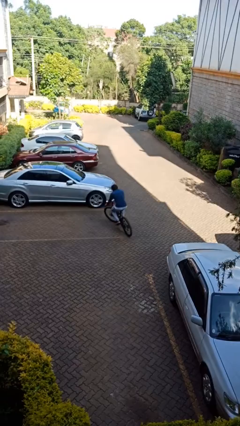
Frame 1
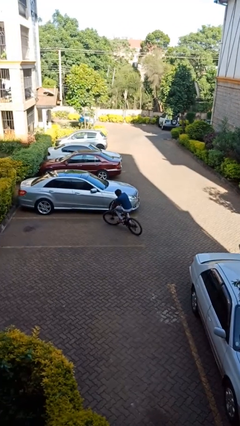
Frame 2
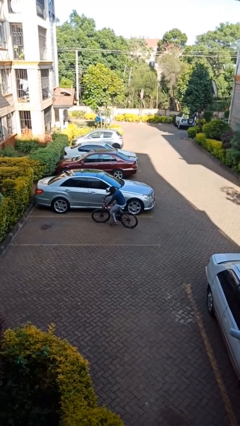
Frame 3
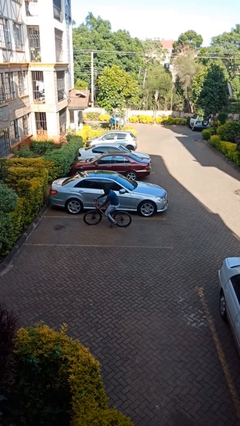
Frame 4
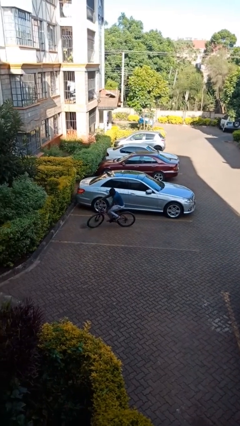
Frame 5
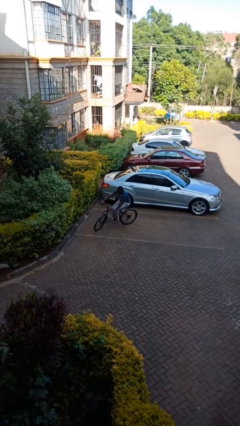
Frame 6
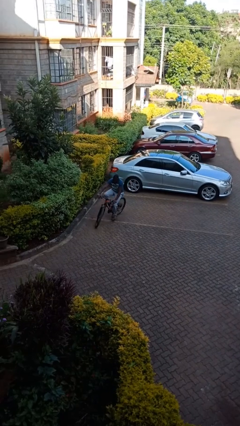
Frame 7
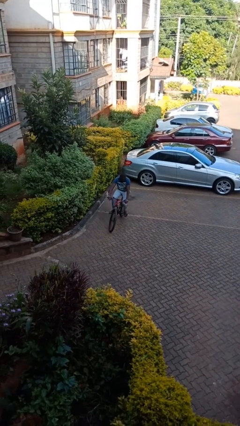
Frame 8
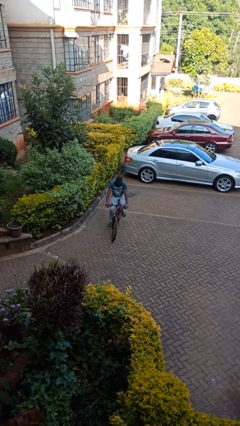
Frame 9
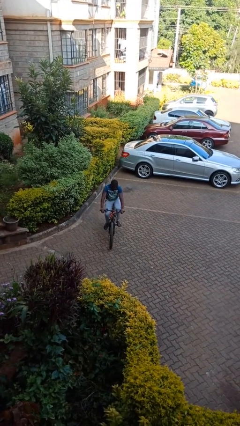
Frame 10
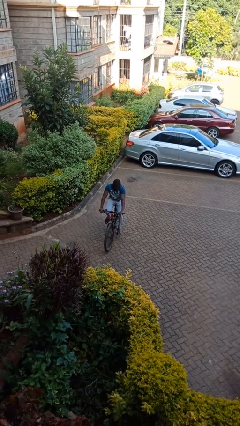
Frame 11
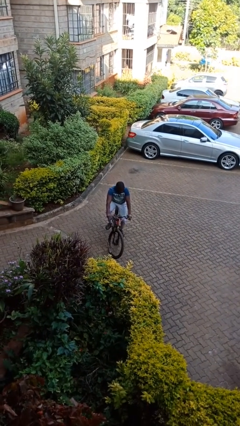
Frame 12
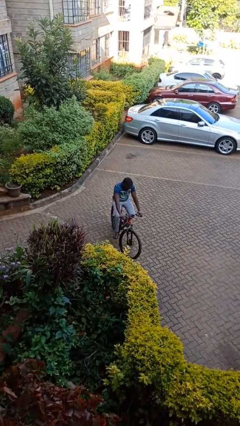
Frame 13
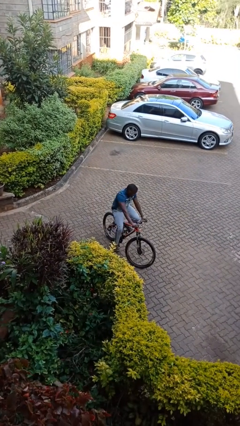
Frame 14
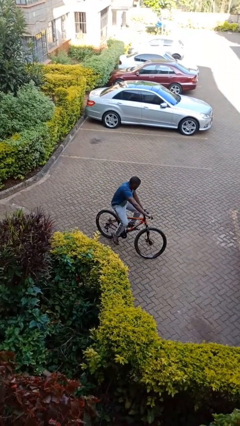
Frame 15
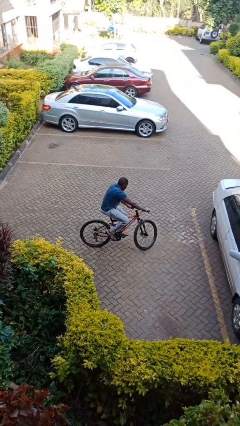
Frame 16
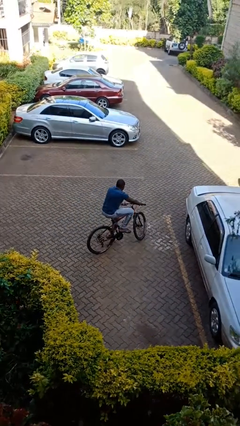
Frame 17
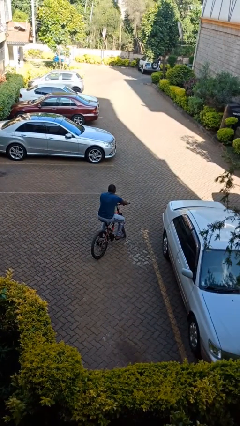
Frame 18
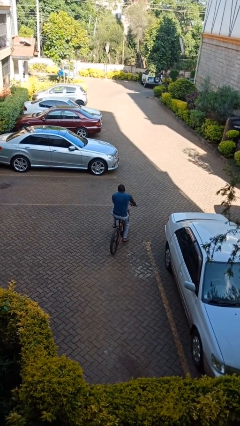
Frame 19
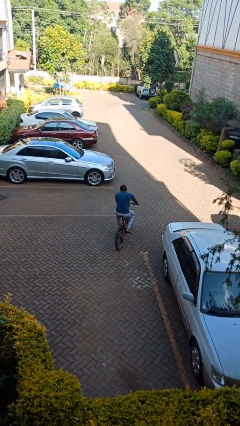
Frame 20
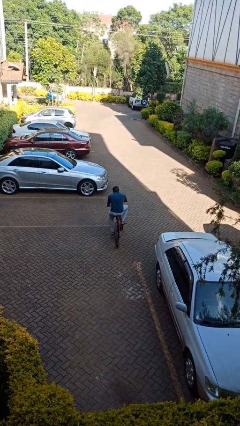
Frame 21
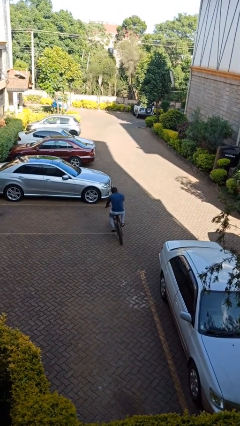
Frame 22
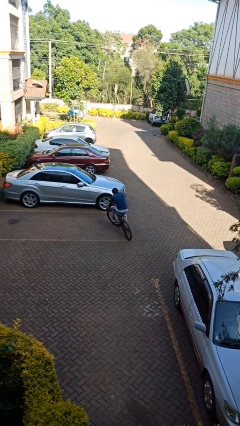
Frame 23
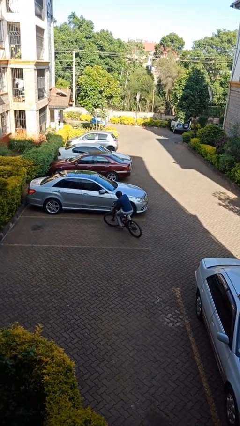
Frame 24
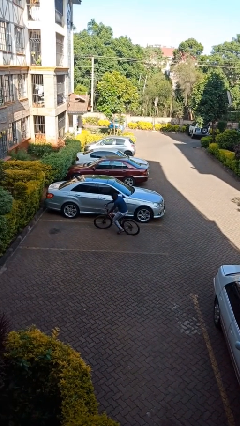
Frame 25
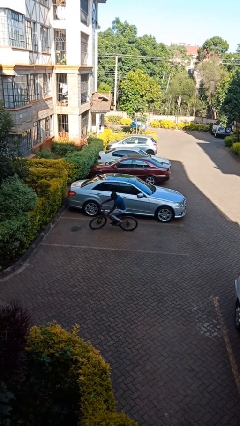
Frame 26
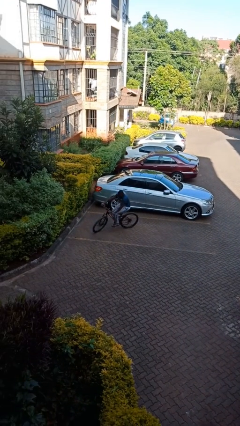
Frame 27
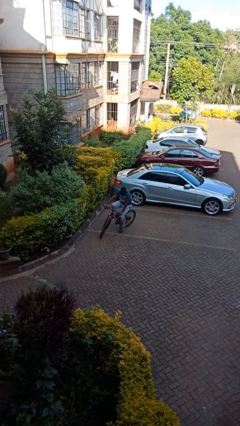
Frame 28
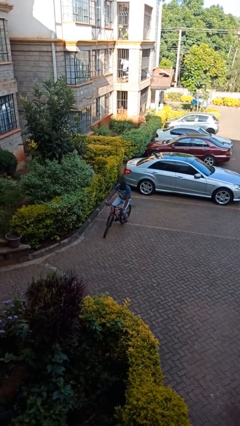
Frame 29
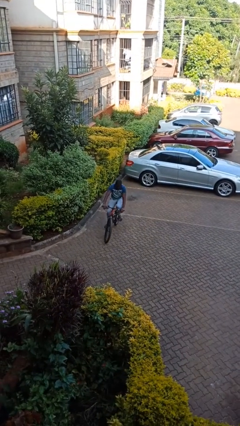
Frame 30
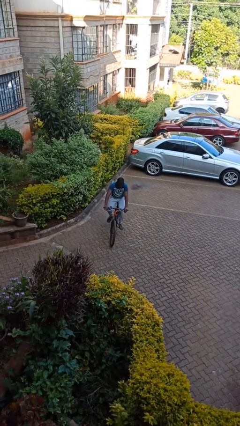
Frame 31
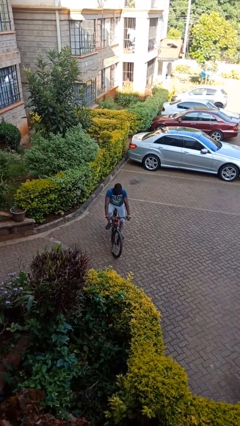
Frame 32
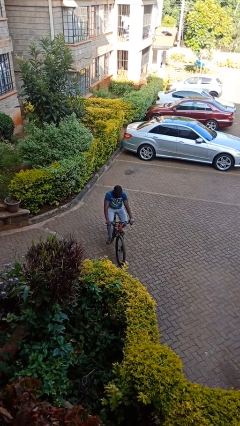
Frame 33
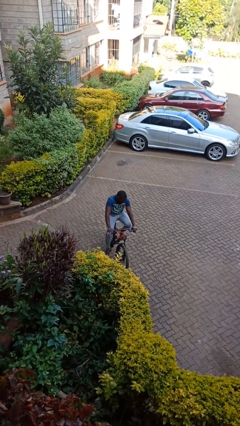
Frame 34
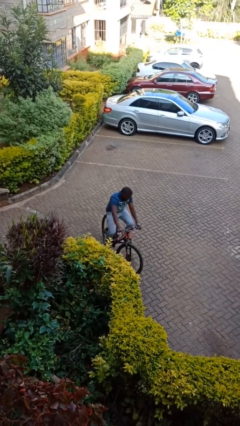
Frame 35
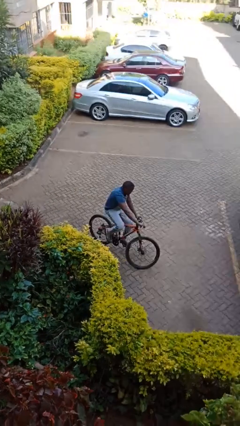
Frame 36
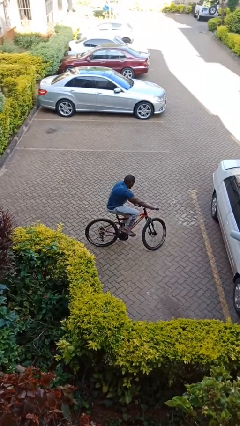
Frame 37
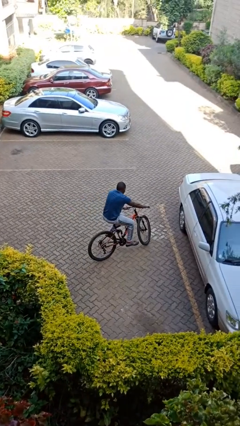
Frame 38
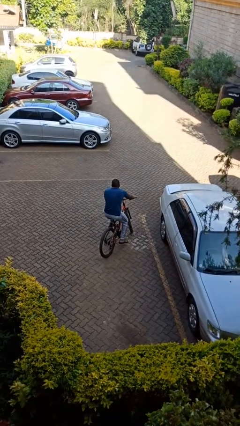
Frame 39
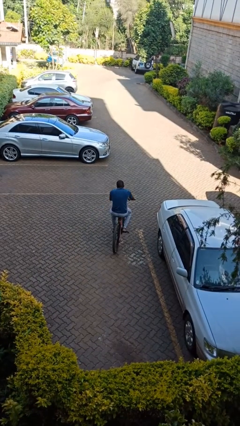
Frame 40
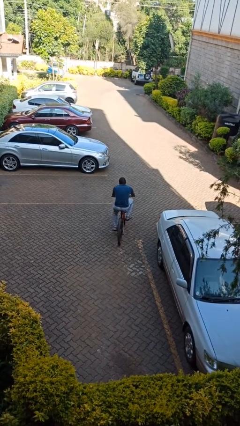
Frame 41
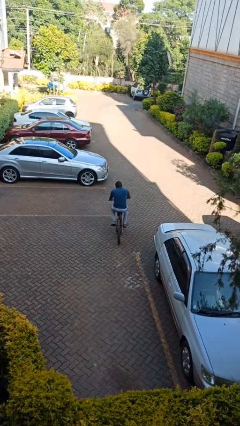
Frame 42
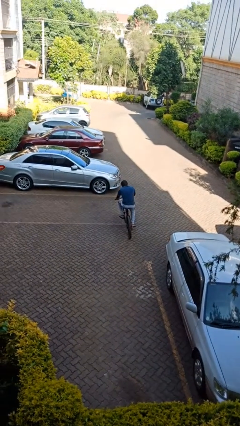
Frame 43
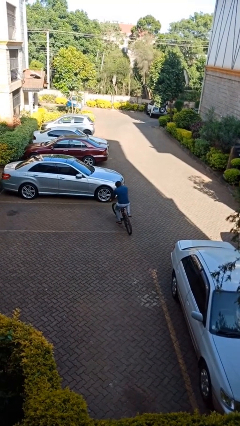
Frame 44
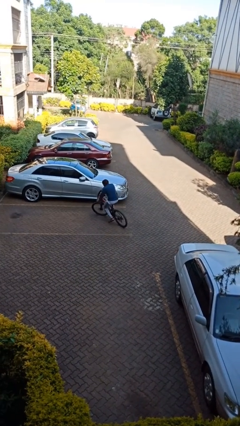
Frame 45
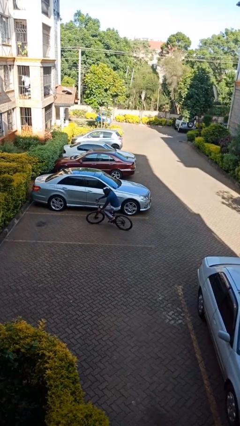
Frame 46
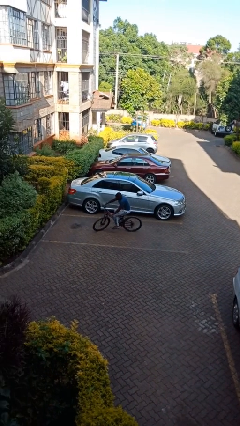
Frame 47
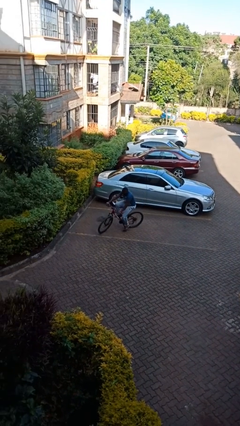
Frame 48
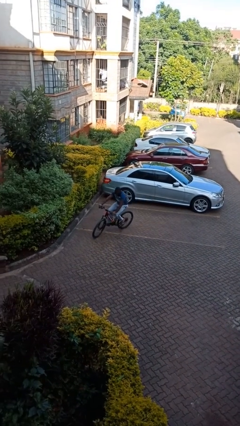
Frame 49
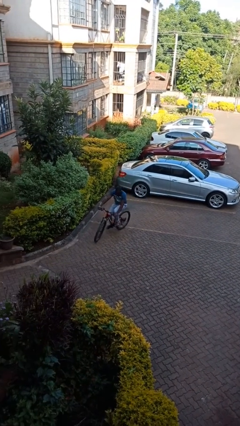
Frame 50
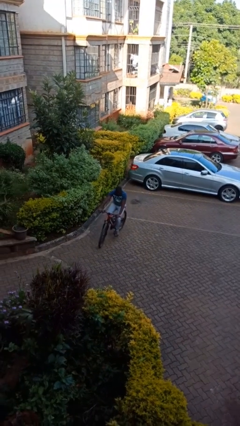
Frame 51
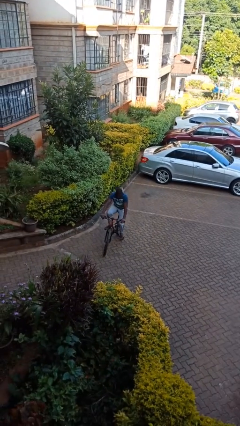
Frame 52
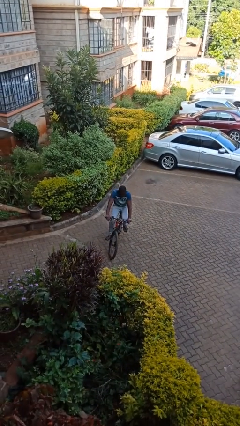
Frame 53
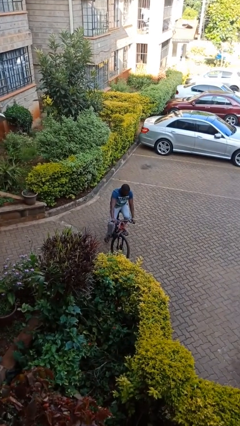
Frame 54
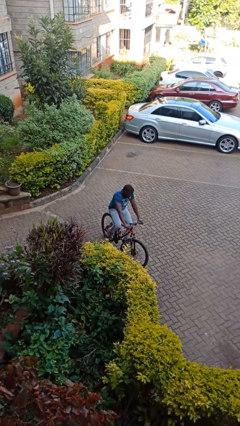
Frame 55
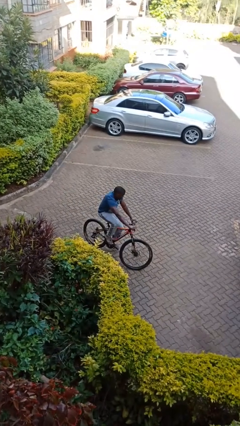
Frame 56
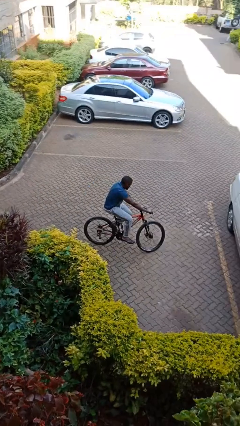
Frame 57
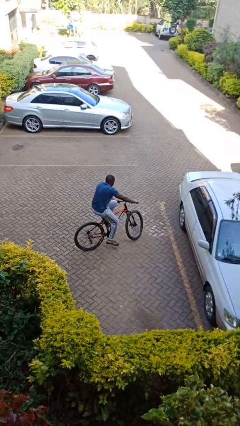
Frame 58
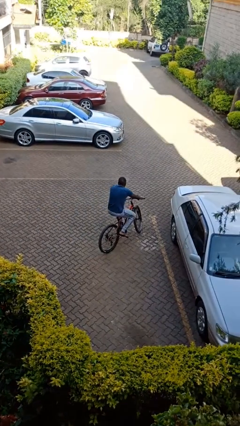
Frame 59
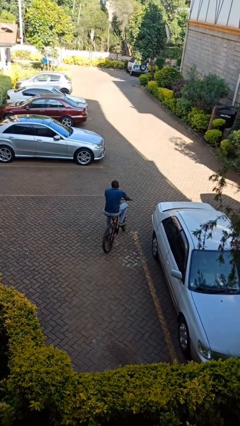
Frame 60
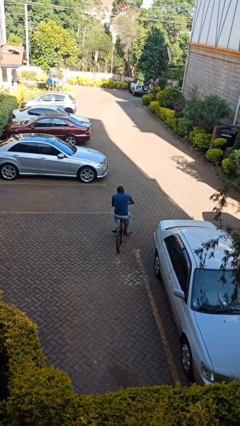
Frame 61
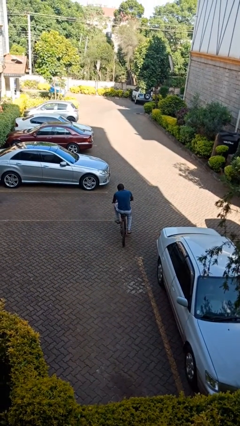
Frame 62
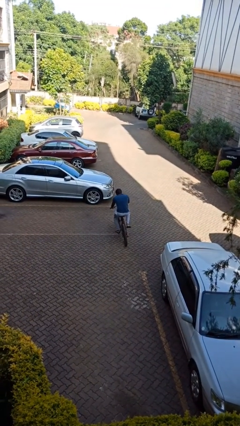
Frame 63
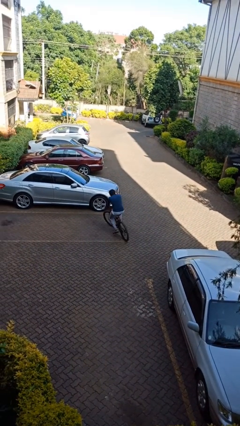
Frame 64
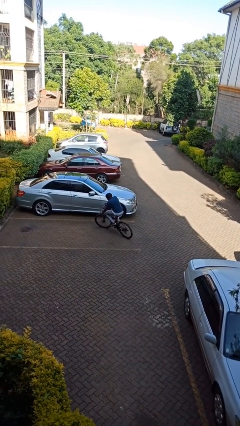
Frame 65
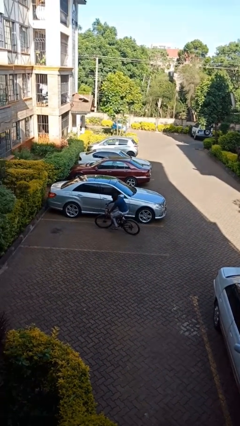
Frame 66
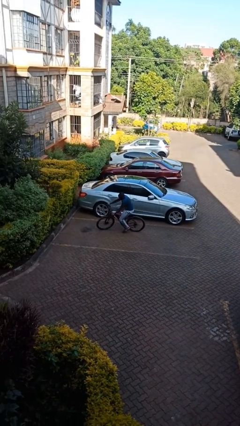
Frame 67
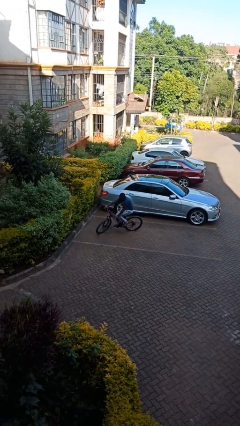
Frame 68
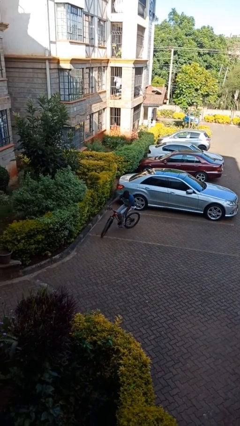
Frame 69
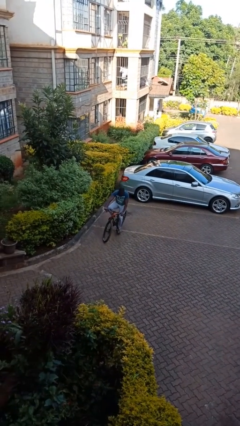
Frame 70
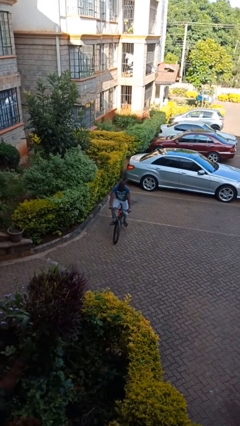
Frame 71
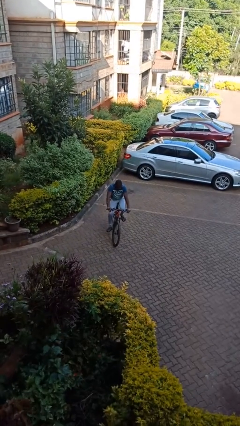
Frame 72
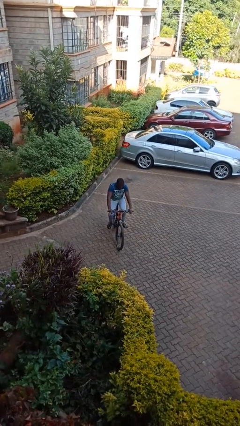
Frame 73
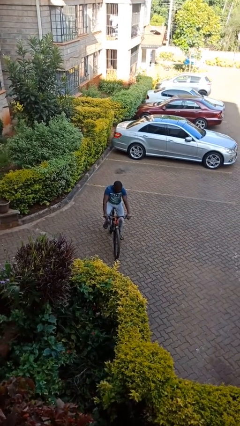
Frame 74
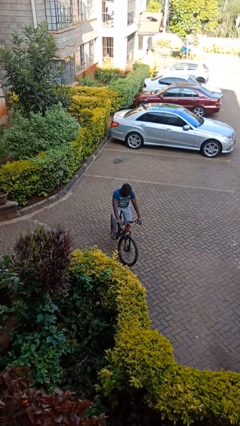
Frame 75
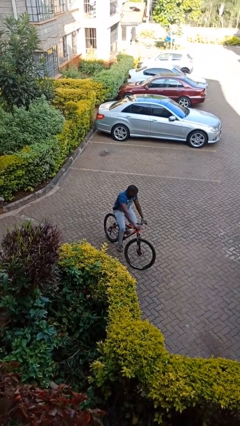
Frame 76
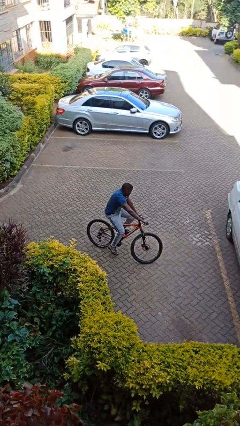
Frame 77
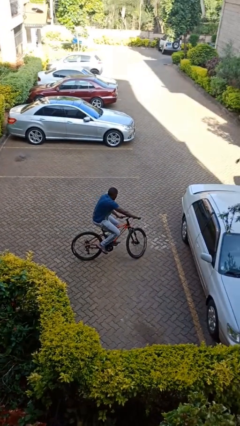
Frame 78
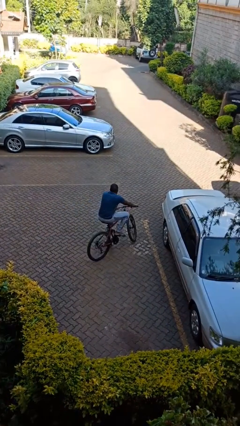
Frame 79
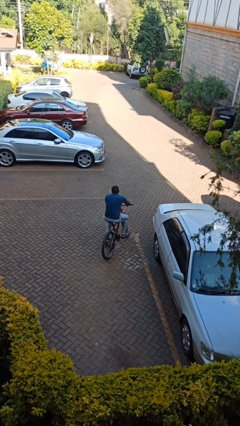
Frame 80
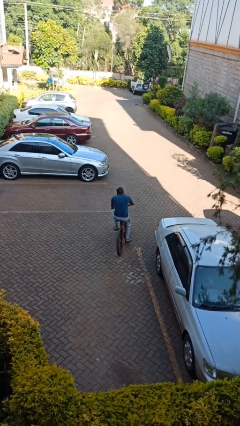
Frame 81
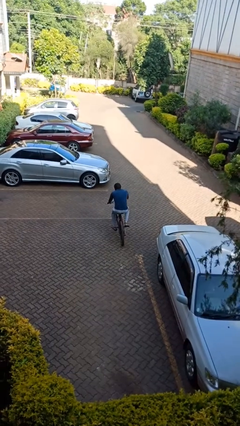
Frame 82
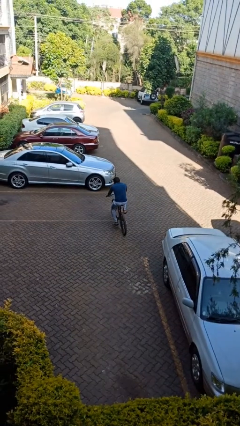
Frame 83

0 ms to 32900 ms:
person rides bicycle

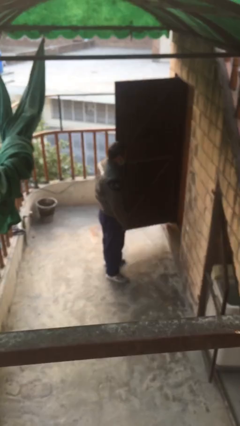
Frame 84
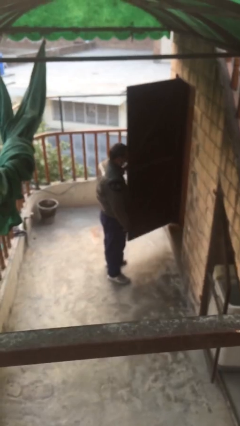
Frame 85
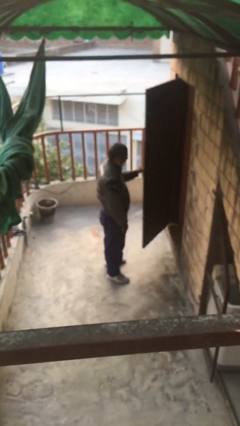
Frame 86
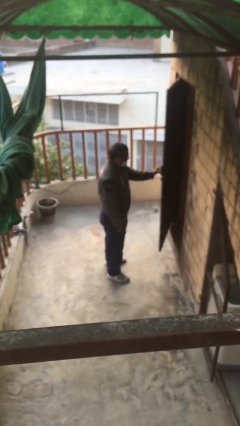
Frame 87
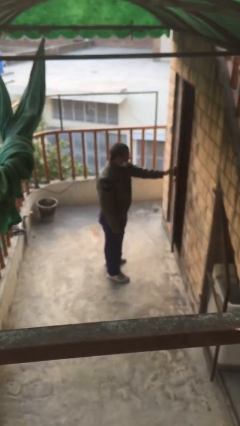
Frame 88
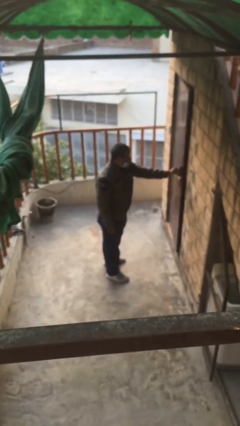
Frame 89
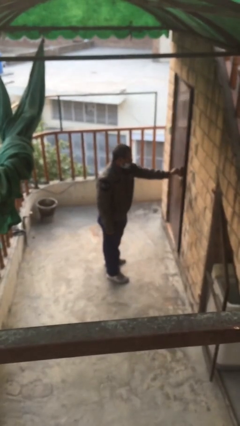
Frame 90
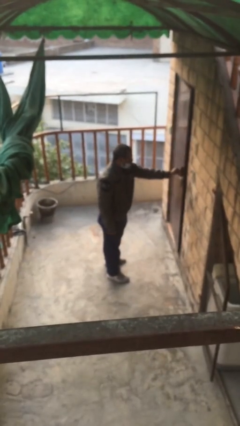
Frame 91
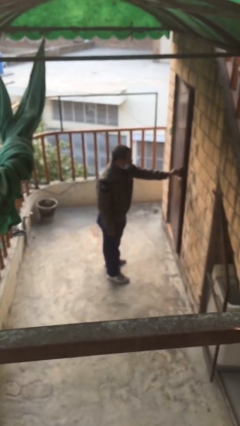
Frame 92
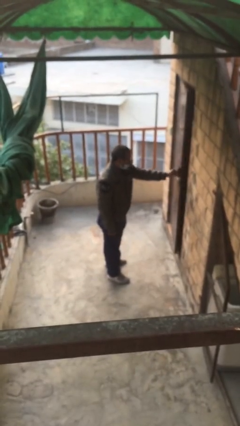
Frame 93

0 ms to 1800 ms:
person closes facility door
